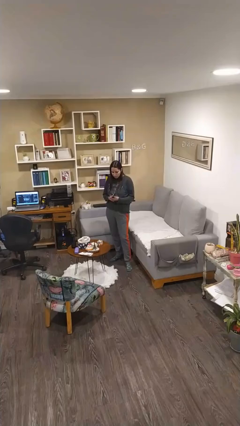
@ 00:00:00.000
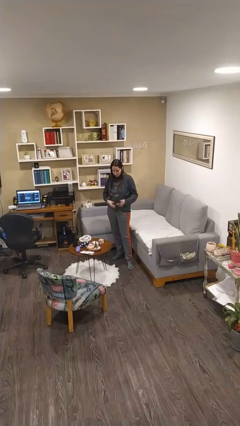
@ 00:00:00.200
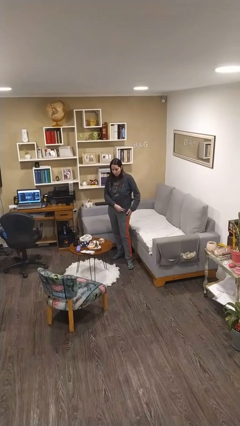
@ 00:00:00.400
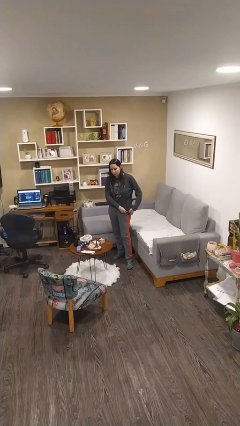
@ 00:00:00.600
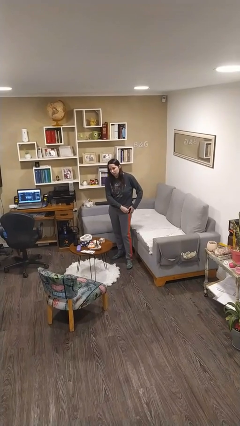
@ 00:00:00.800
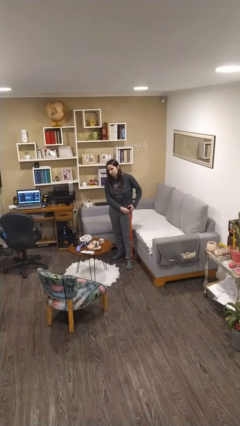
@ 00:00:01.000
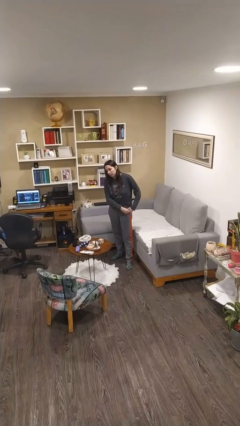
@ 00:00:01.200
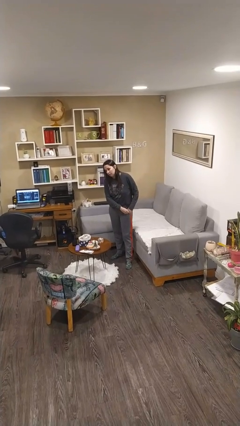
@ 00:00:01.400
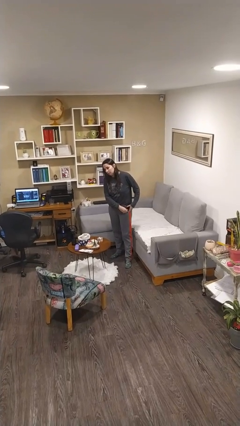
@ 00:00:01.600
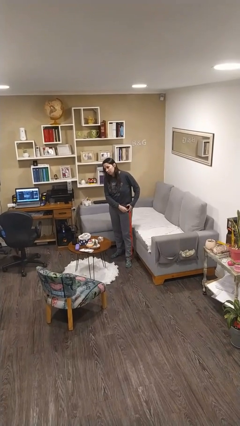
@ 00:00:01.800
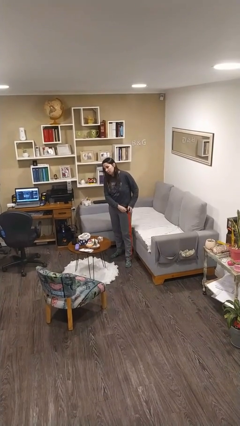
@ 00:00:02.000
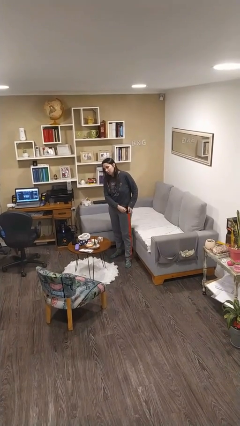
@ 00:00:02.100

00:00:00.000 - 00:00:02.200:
person puts phone into pocket

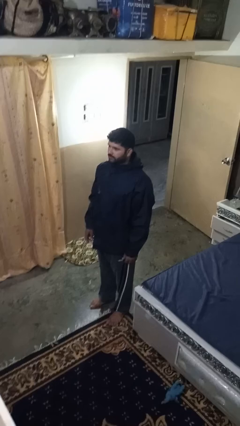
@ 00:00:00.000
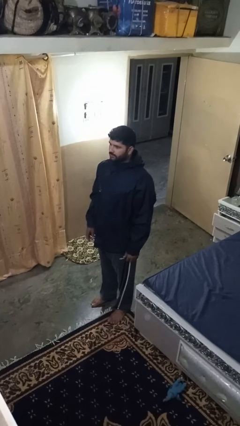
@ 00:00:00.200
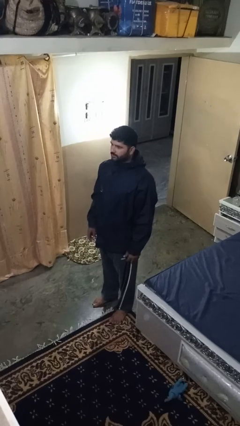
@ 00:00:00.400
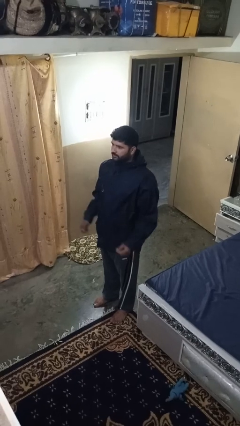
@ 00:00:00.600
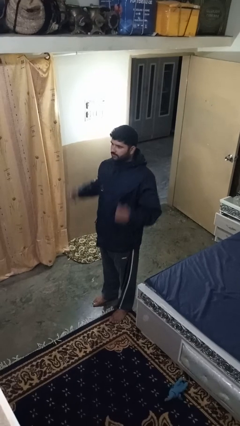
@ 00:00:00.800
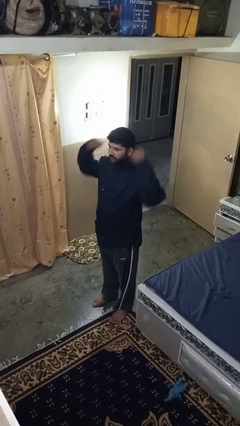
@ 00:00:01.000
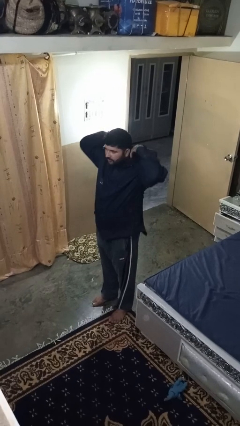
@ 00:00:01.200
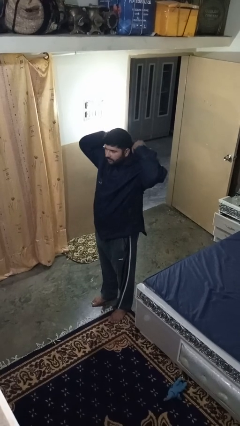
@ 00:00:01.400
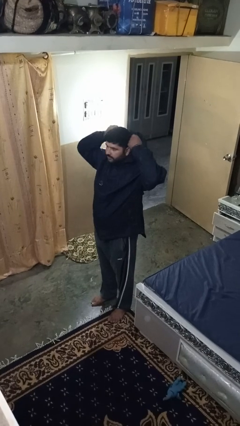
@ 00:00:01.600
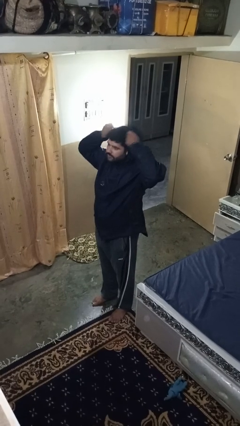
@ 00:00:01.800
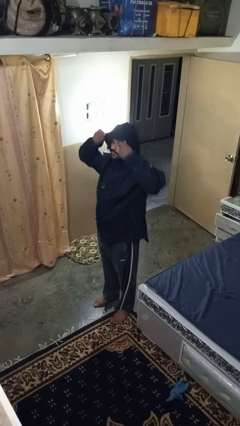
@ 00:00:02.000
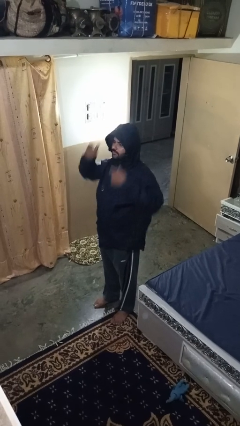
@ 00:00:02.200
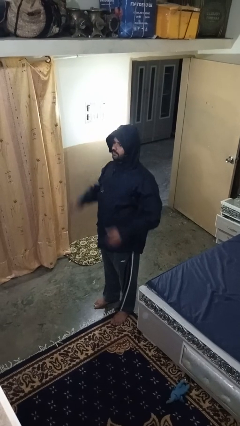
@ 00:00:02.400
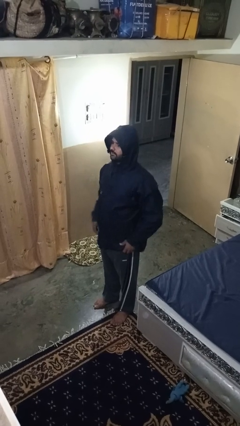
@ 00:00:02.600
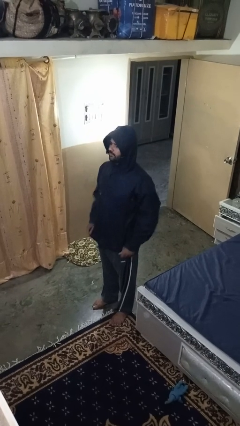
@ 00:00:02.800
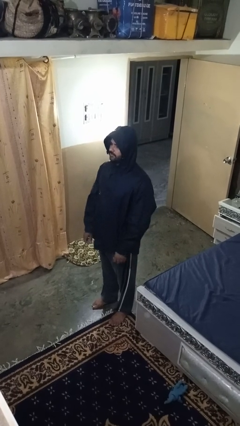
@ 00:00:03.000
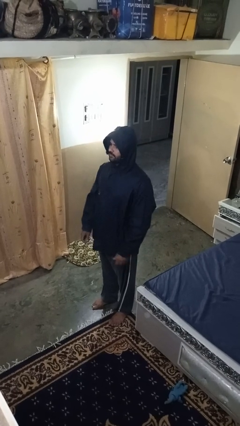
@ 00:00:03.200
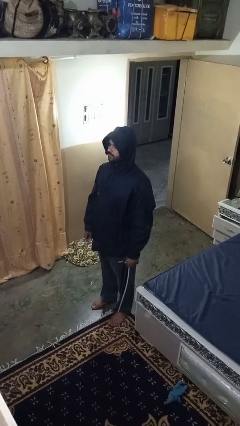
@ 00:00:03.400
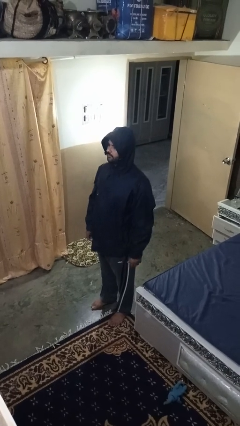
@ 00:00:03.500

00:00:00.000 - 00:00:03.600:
person puts on hoodie

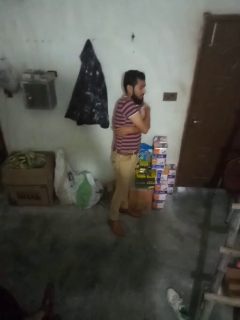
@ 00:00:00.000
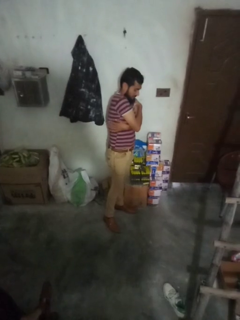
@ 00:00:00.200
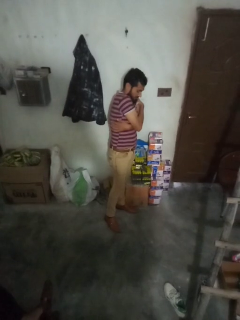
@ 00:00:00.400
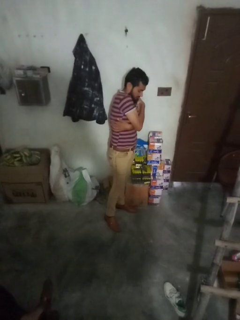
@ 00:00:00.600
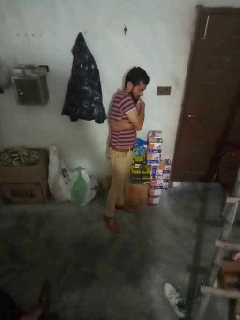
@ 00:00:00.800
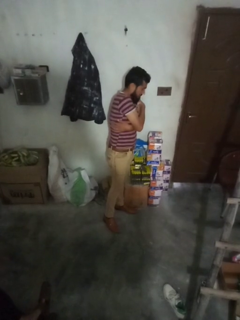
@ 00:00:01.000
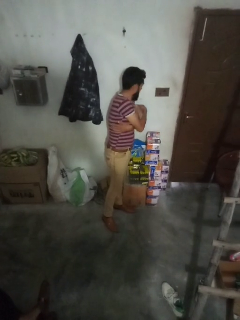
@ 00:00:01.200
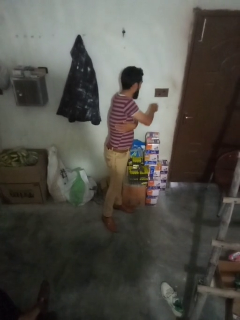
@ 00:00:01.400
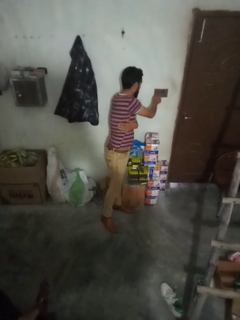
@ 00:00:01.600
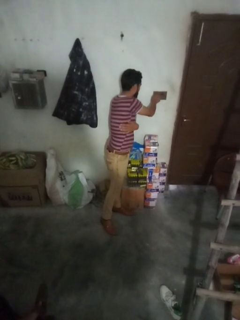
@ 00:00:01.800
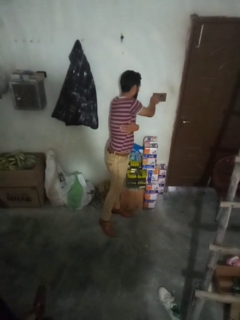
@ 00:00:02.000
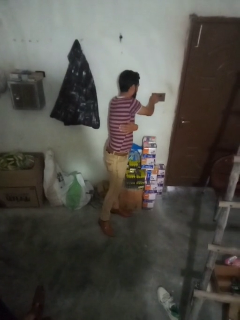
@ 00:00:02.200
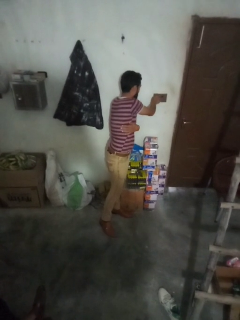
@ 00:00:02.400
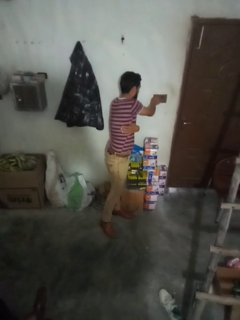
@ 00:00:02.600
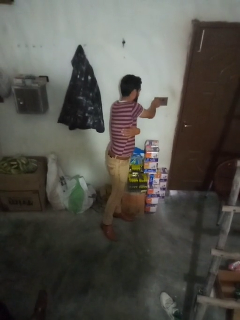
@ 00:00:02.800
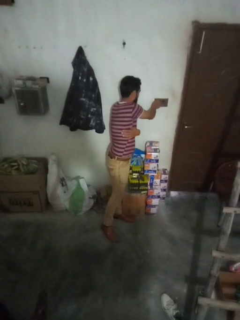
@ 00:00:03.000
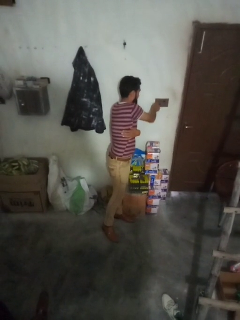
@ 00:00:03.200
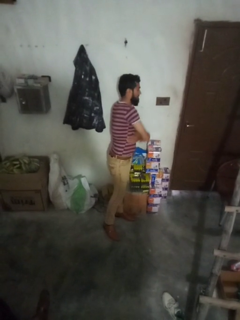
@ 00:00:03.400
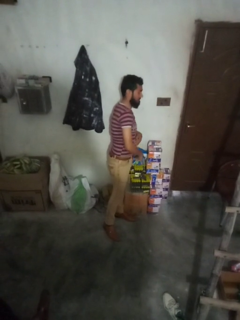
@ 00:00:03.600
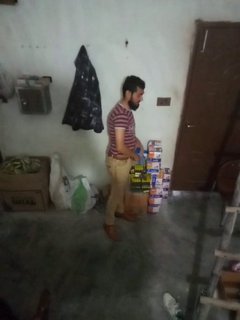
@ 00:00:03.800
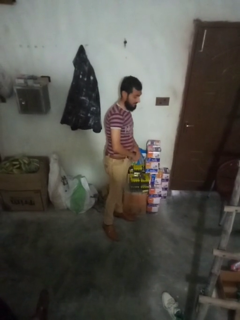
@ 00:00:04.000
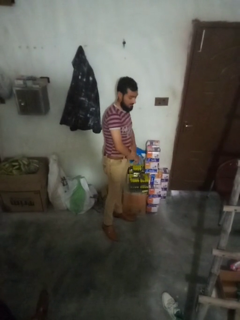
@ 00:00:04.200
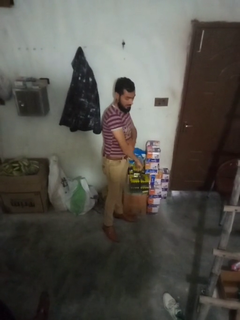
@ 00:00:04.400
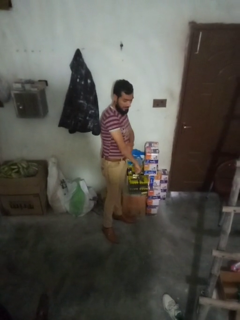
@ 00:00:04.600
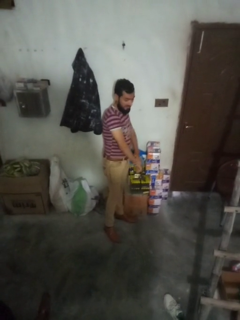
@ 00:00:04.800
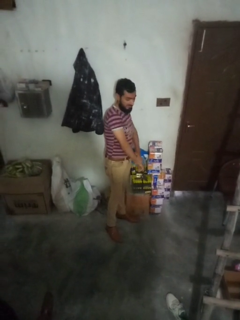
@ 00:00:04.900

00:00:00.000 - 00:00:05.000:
person adjusts thermostat

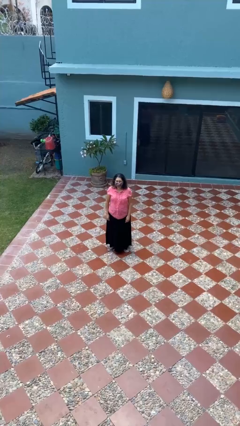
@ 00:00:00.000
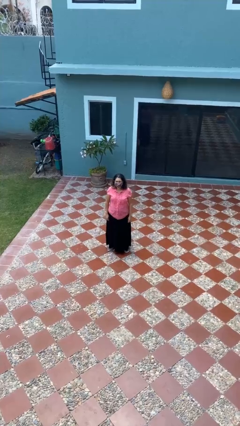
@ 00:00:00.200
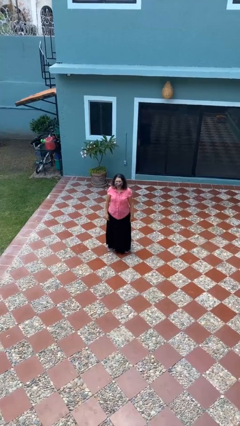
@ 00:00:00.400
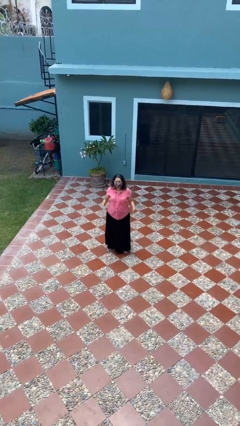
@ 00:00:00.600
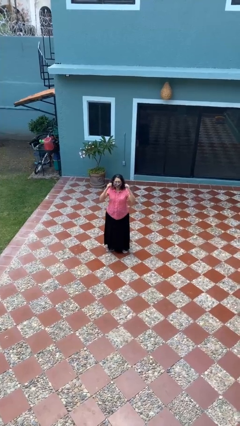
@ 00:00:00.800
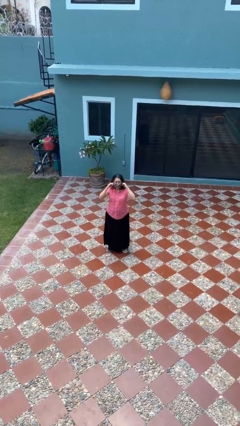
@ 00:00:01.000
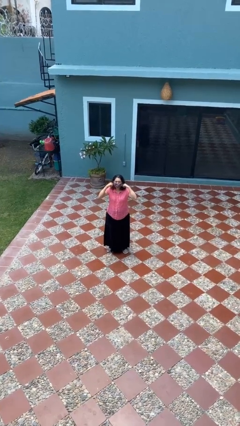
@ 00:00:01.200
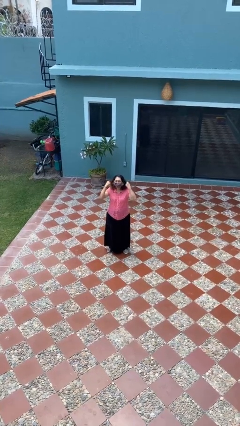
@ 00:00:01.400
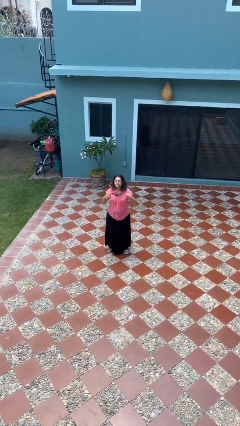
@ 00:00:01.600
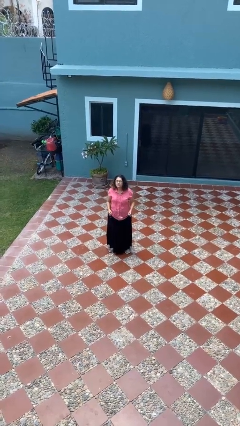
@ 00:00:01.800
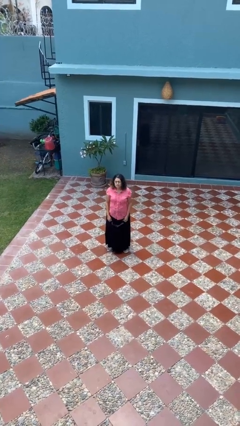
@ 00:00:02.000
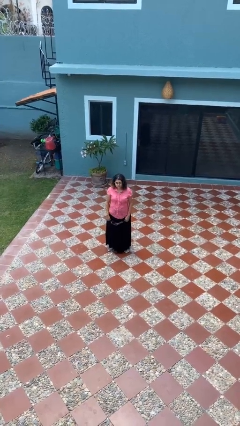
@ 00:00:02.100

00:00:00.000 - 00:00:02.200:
person takes off facemask

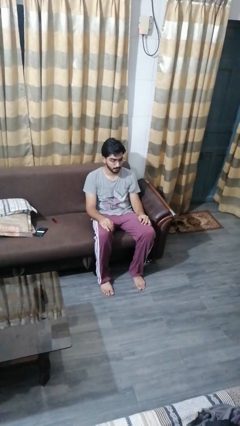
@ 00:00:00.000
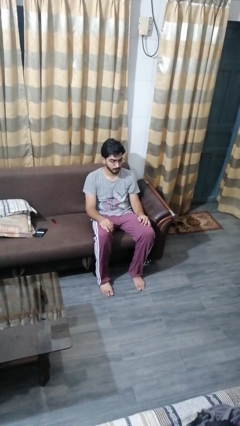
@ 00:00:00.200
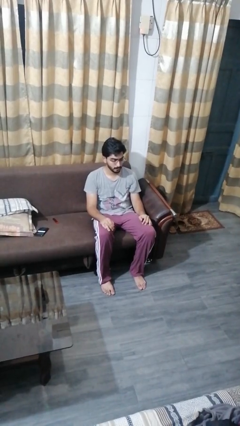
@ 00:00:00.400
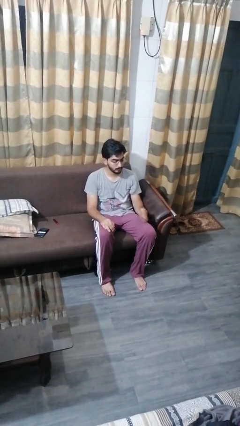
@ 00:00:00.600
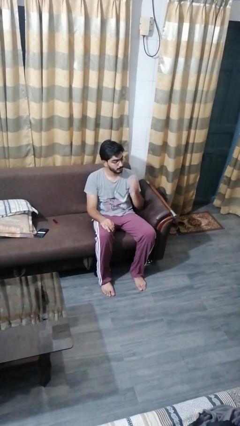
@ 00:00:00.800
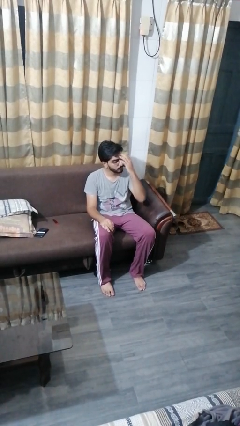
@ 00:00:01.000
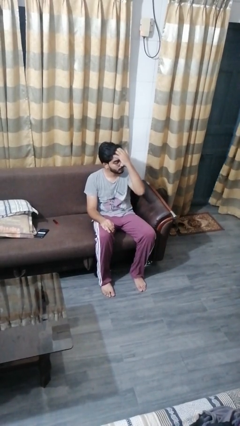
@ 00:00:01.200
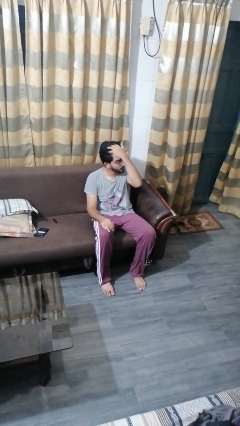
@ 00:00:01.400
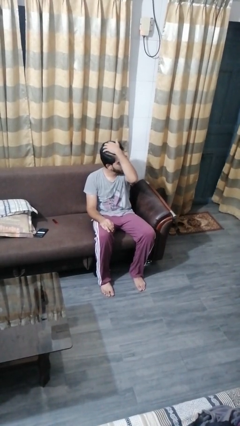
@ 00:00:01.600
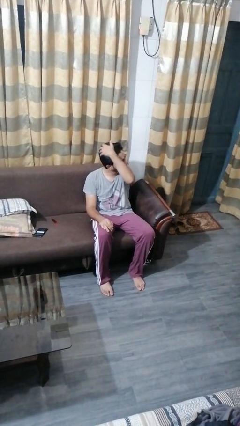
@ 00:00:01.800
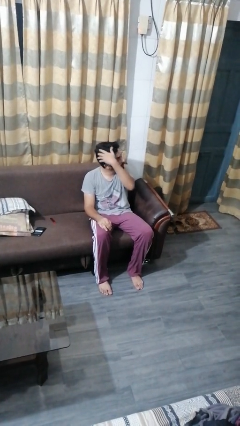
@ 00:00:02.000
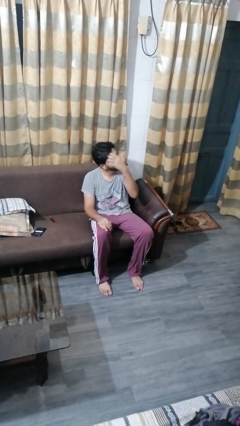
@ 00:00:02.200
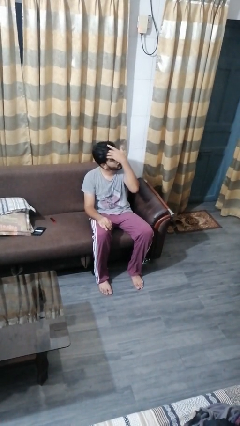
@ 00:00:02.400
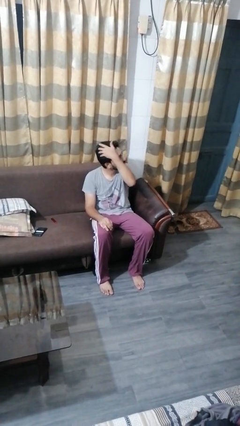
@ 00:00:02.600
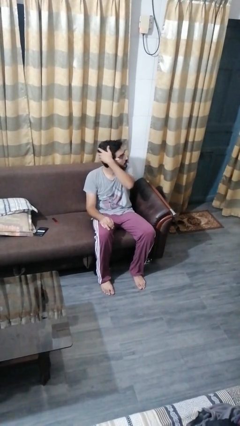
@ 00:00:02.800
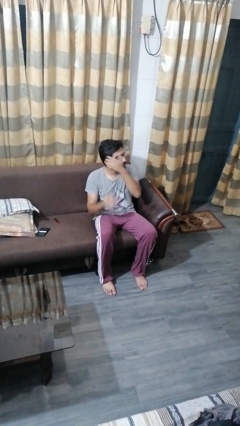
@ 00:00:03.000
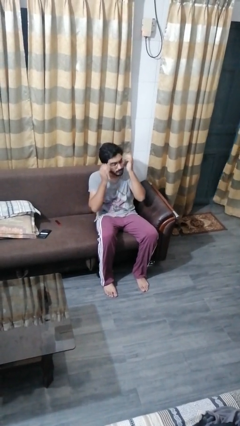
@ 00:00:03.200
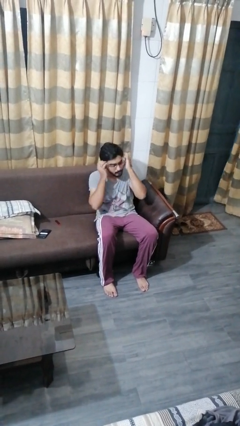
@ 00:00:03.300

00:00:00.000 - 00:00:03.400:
person strokes hair

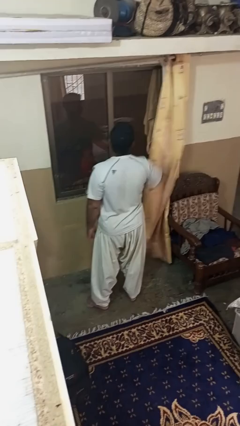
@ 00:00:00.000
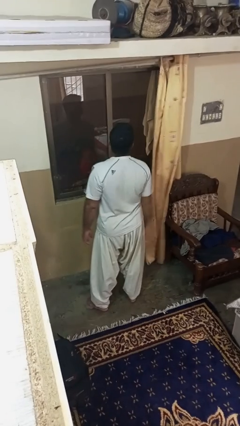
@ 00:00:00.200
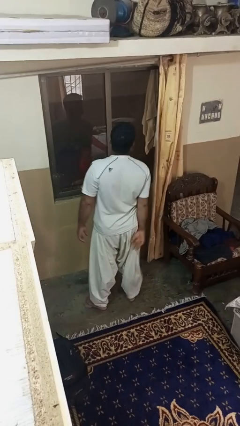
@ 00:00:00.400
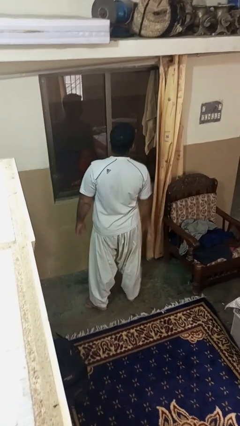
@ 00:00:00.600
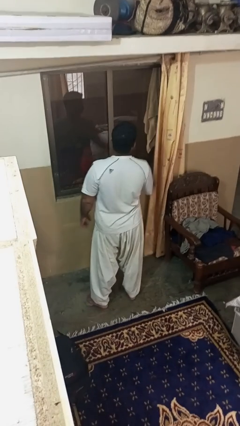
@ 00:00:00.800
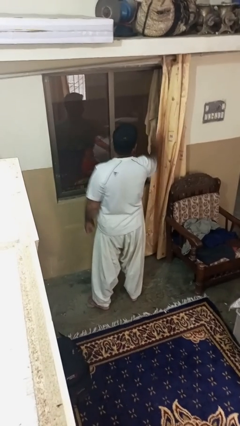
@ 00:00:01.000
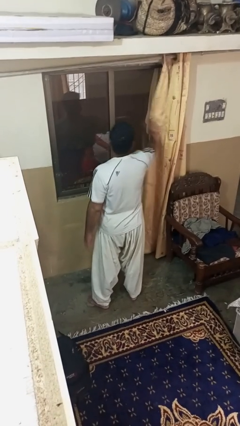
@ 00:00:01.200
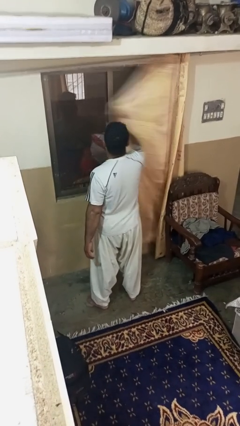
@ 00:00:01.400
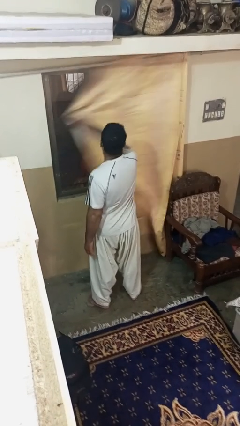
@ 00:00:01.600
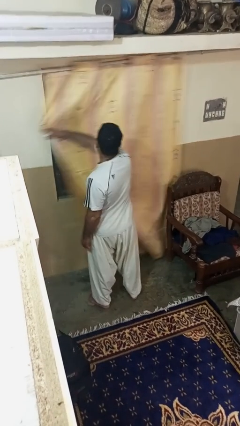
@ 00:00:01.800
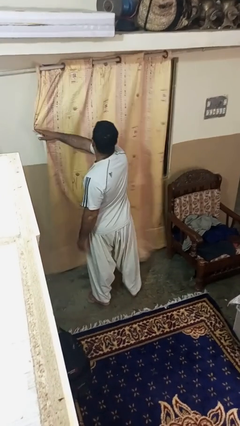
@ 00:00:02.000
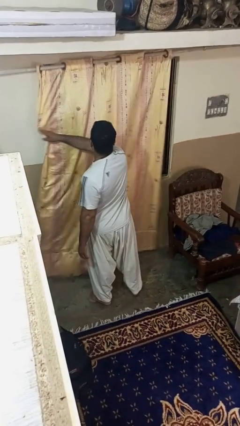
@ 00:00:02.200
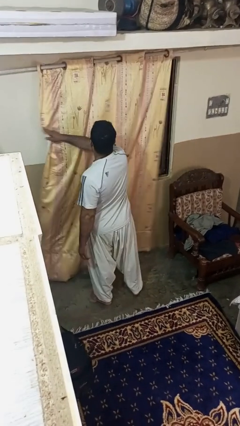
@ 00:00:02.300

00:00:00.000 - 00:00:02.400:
person closes curtains
